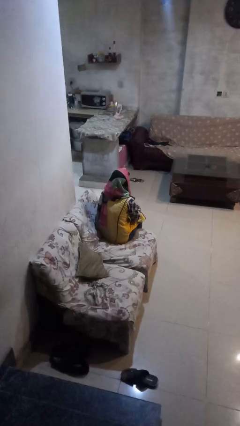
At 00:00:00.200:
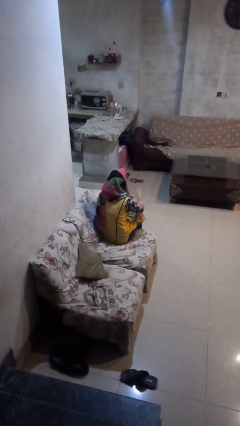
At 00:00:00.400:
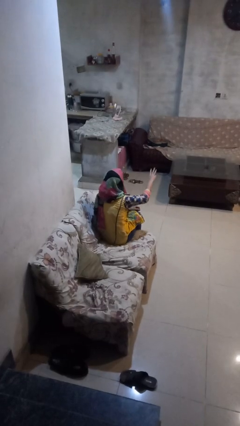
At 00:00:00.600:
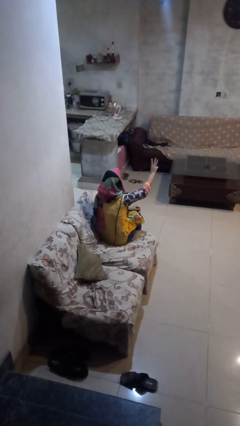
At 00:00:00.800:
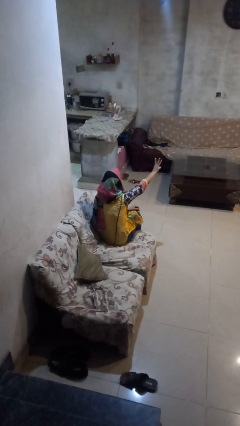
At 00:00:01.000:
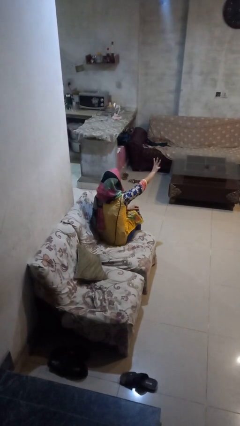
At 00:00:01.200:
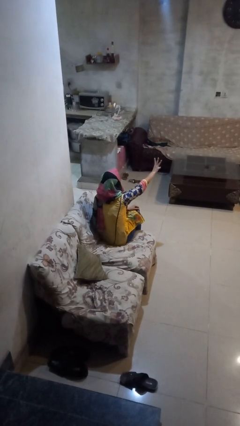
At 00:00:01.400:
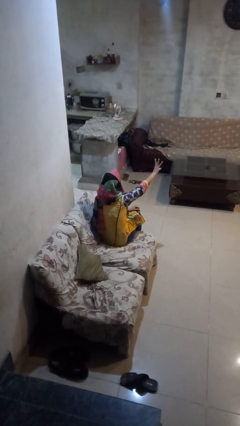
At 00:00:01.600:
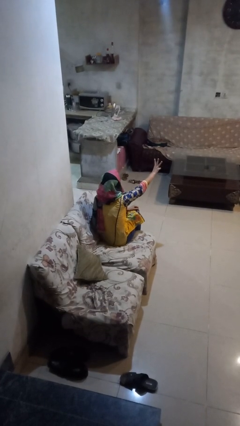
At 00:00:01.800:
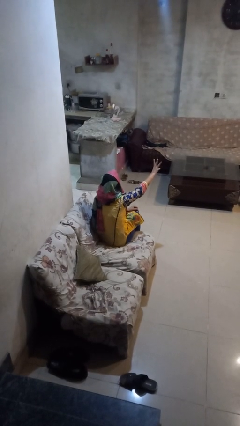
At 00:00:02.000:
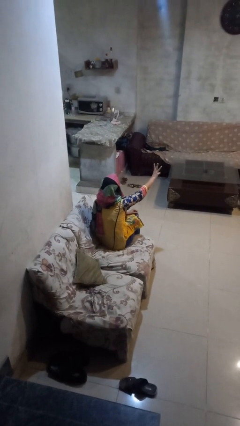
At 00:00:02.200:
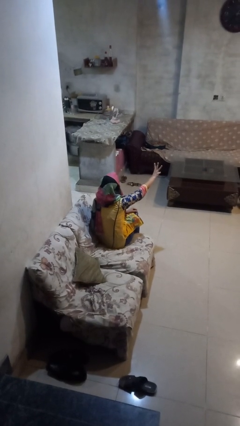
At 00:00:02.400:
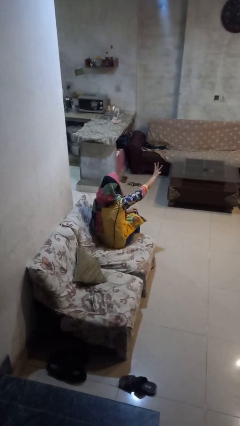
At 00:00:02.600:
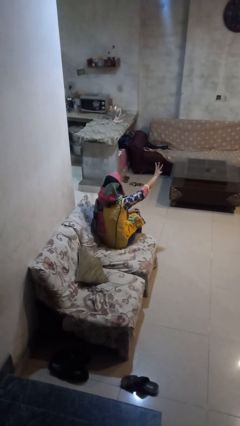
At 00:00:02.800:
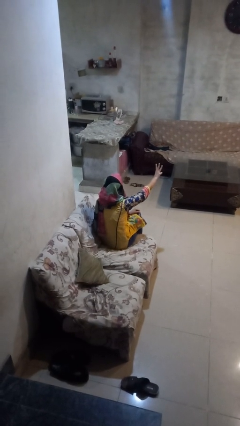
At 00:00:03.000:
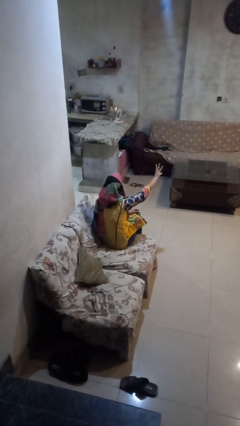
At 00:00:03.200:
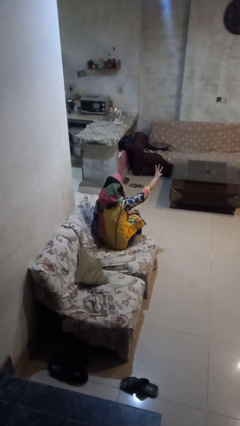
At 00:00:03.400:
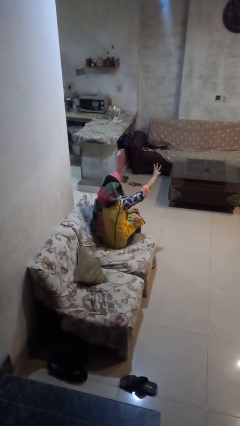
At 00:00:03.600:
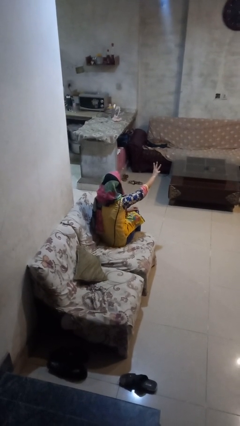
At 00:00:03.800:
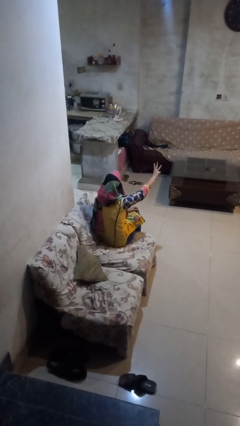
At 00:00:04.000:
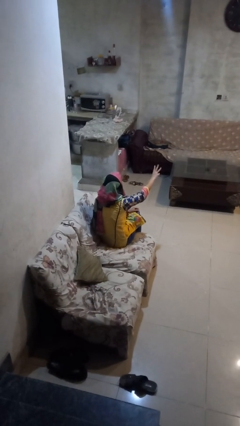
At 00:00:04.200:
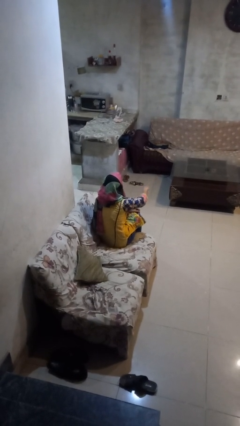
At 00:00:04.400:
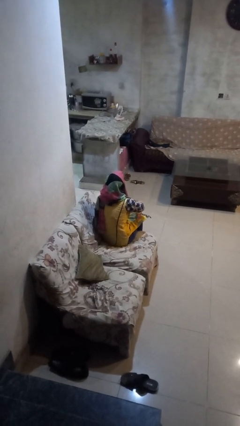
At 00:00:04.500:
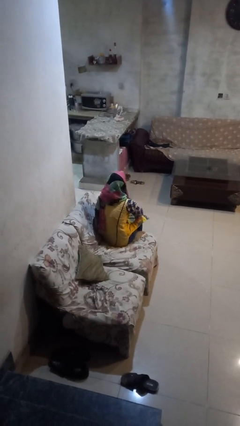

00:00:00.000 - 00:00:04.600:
person gestures number three

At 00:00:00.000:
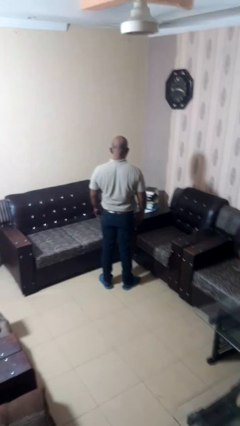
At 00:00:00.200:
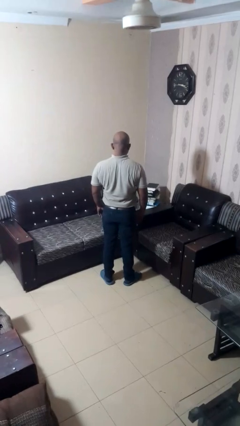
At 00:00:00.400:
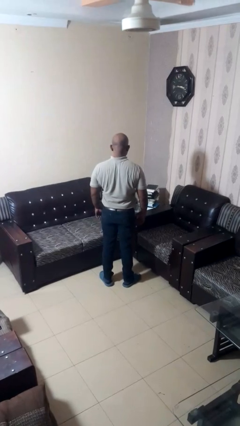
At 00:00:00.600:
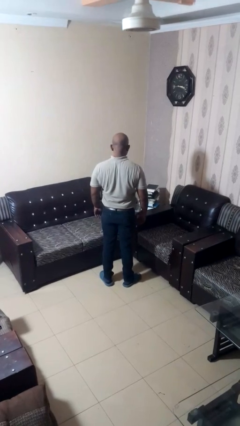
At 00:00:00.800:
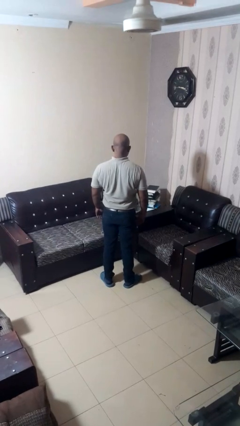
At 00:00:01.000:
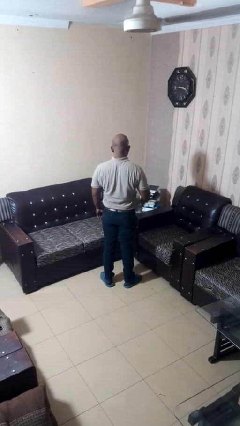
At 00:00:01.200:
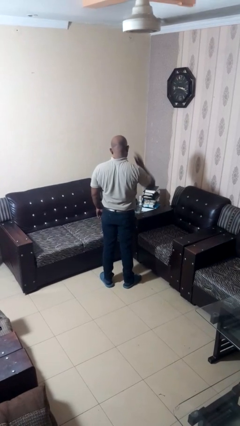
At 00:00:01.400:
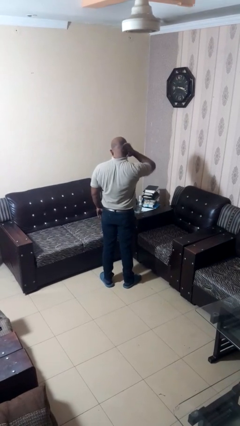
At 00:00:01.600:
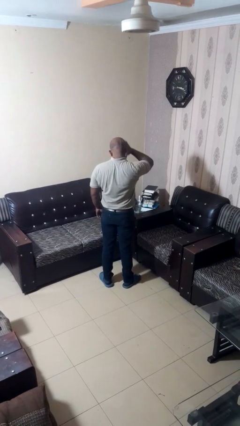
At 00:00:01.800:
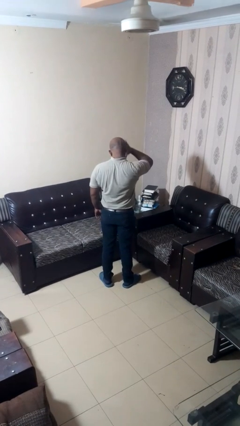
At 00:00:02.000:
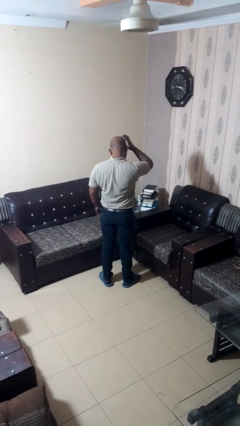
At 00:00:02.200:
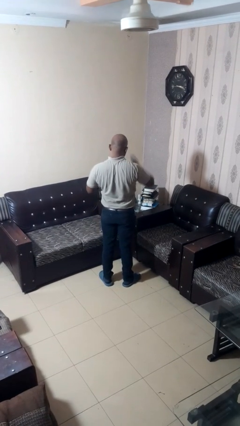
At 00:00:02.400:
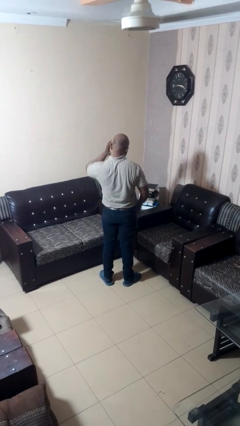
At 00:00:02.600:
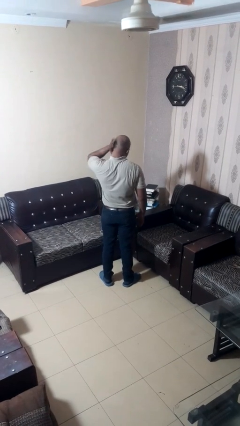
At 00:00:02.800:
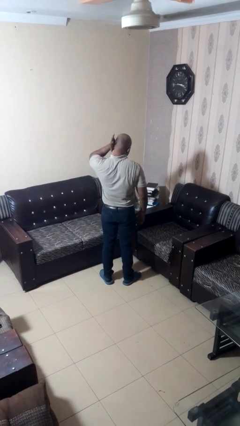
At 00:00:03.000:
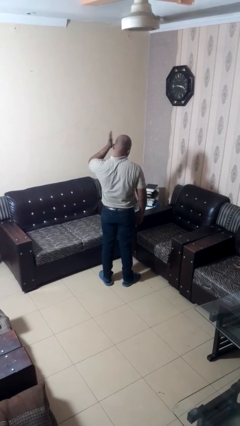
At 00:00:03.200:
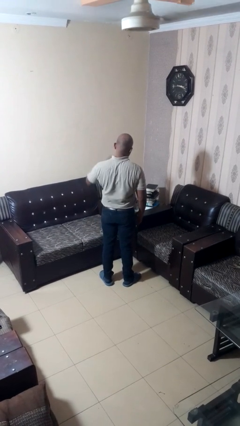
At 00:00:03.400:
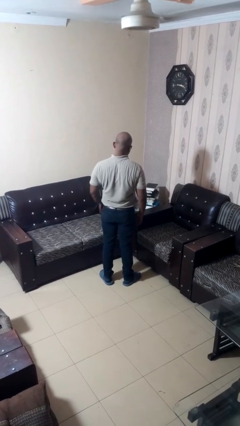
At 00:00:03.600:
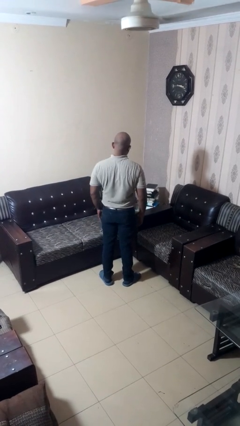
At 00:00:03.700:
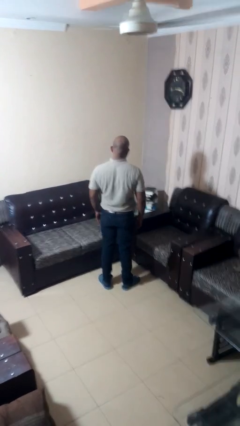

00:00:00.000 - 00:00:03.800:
person touches earlobe

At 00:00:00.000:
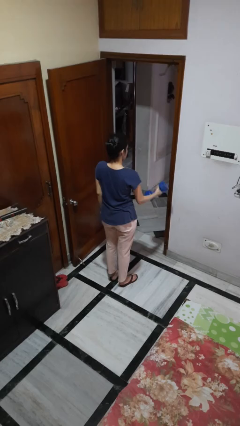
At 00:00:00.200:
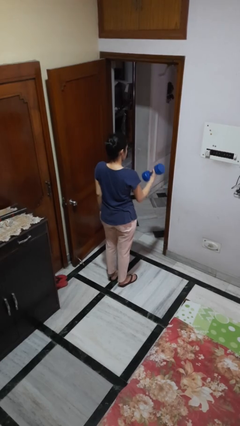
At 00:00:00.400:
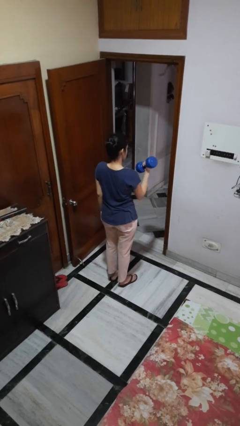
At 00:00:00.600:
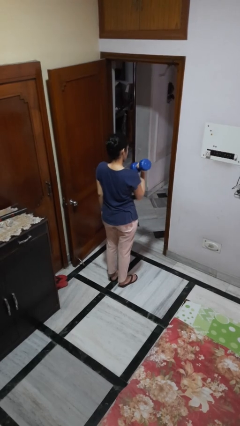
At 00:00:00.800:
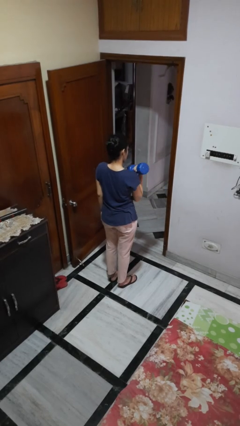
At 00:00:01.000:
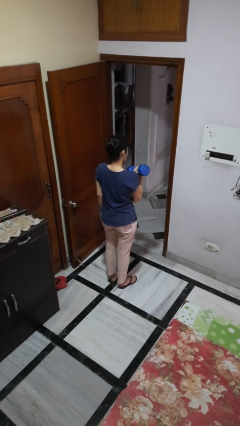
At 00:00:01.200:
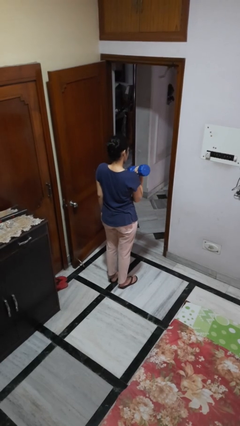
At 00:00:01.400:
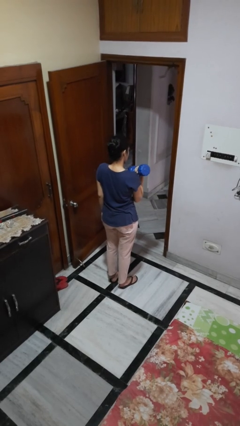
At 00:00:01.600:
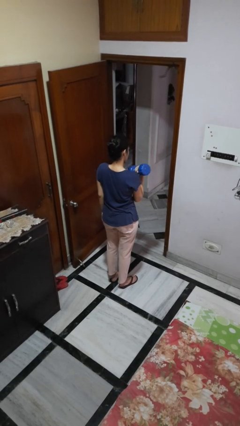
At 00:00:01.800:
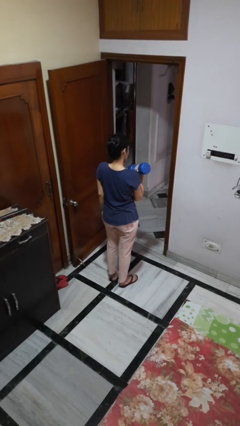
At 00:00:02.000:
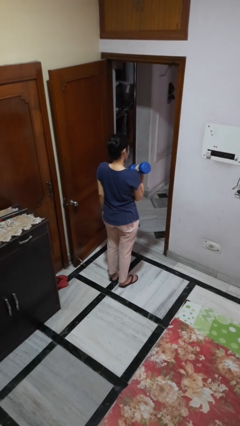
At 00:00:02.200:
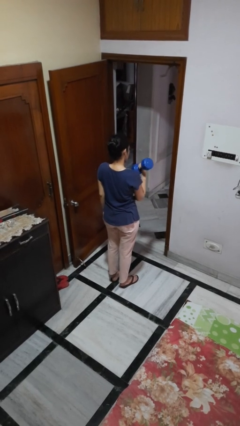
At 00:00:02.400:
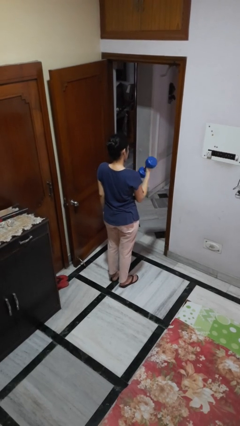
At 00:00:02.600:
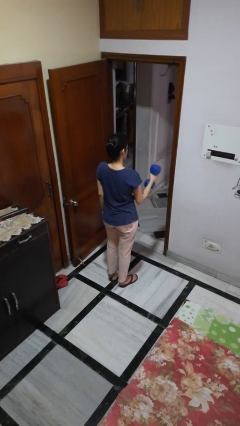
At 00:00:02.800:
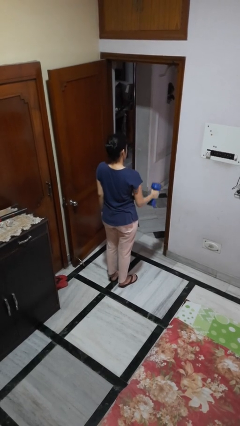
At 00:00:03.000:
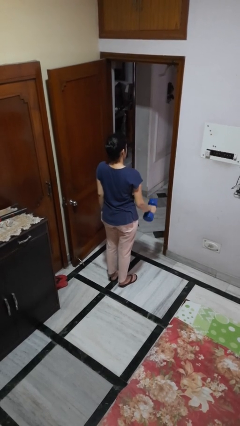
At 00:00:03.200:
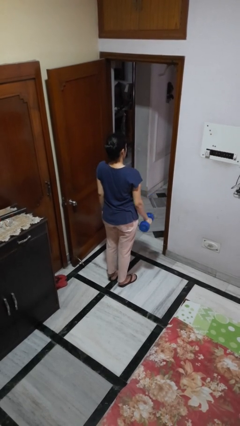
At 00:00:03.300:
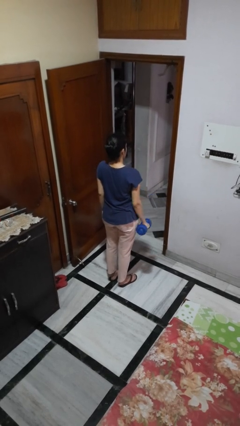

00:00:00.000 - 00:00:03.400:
person lifts dumbbells

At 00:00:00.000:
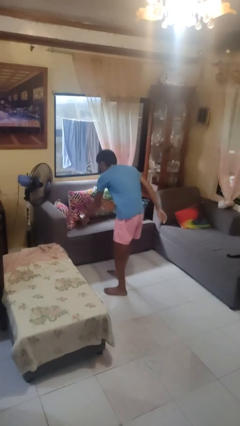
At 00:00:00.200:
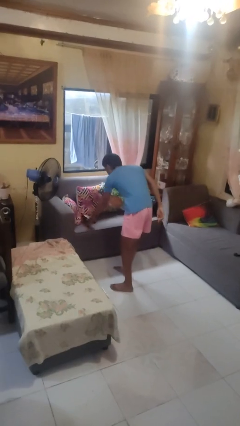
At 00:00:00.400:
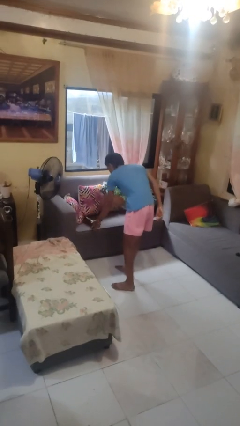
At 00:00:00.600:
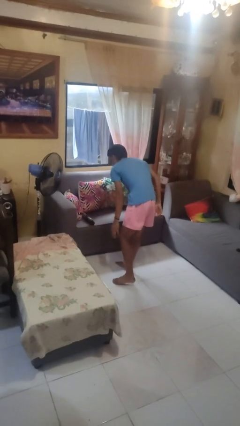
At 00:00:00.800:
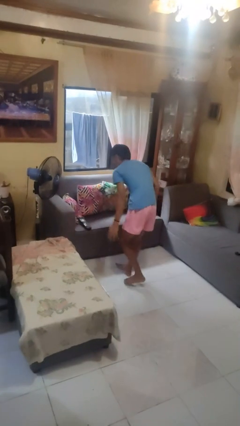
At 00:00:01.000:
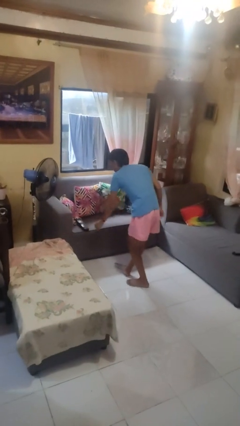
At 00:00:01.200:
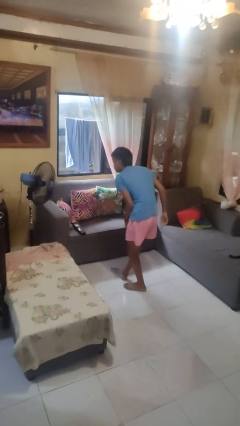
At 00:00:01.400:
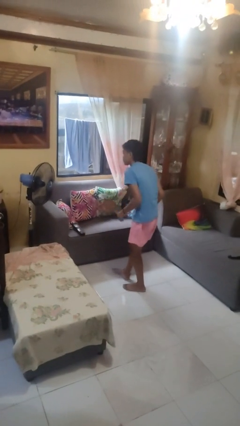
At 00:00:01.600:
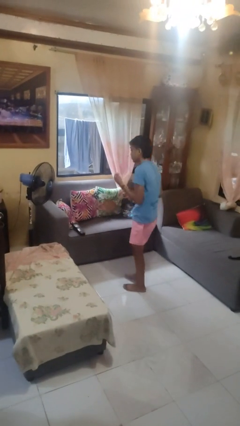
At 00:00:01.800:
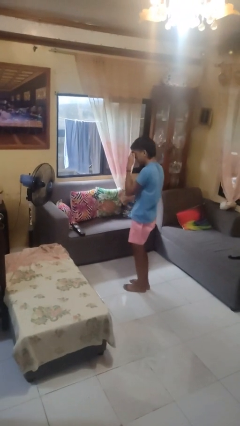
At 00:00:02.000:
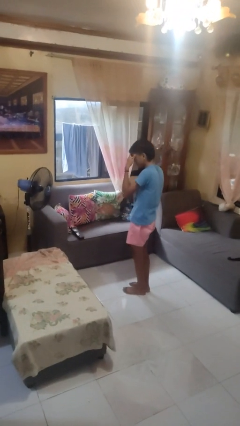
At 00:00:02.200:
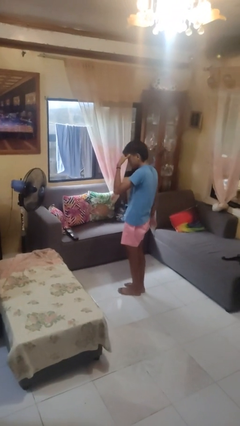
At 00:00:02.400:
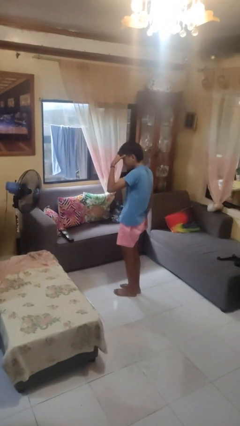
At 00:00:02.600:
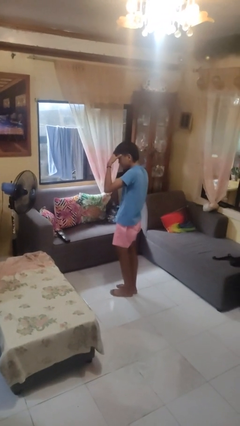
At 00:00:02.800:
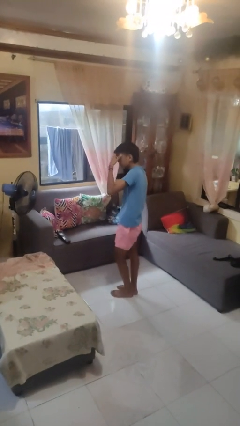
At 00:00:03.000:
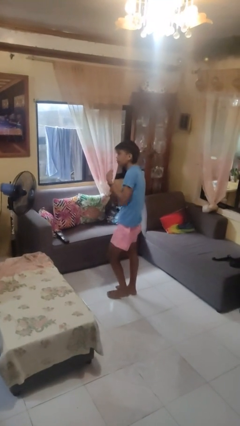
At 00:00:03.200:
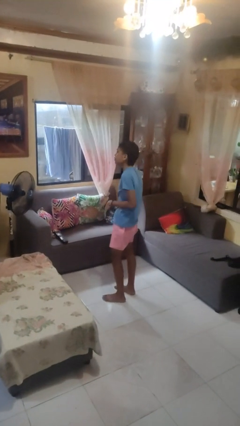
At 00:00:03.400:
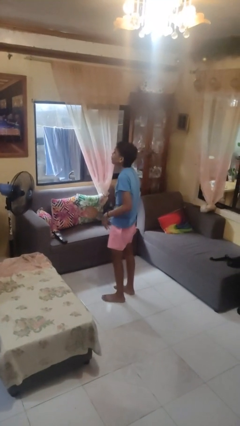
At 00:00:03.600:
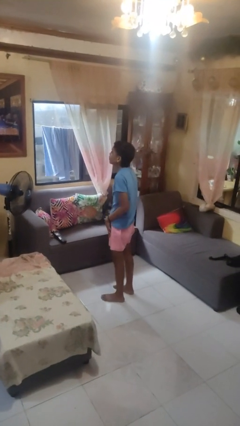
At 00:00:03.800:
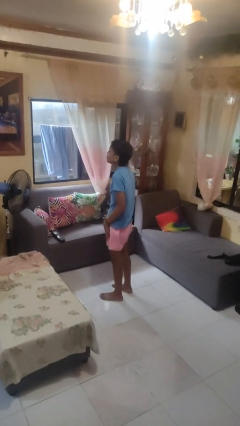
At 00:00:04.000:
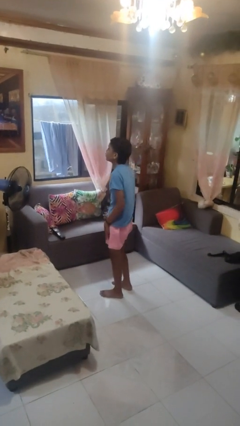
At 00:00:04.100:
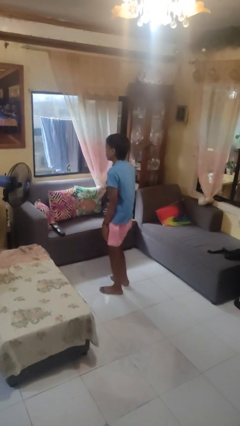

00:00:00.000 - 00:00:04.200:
person puts down object on couch

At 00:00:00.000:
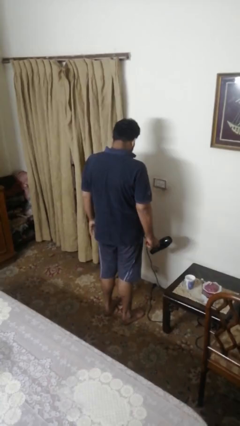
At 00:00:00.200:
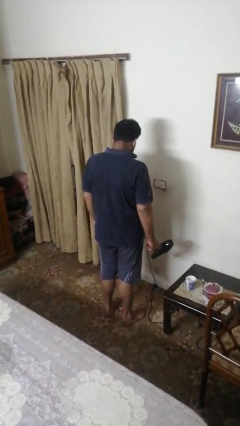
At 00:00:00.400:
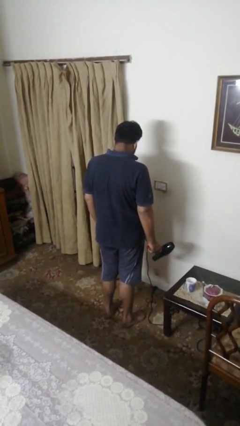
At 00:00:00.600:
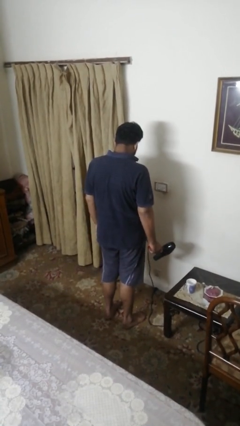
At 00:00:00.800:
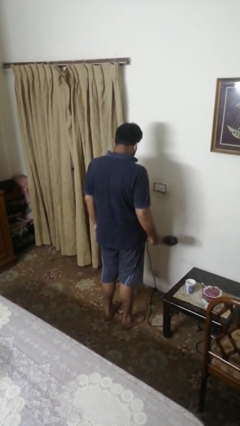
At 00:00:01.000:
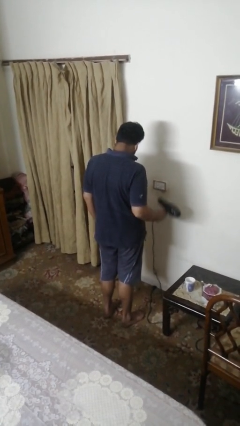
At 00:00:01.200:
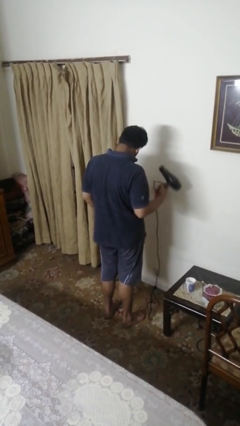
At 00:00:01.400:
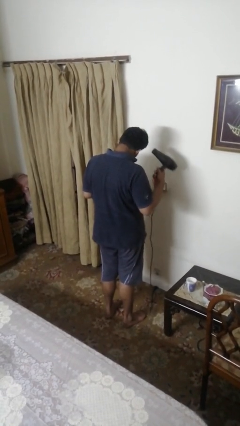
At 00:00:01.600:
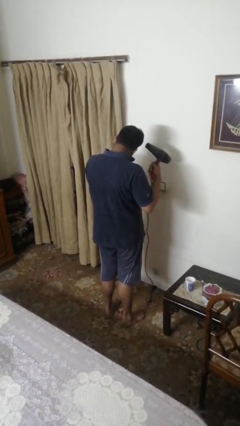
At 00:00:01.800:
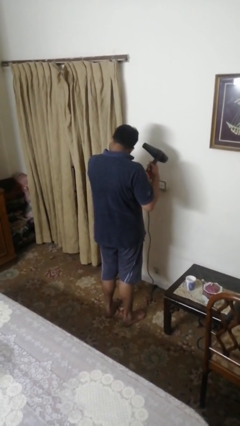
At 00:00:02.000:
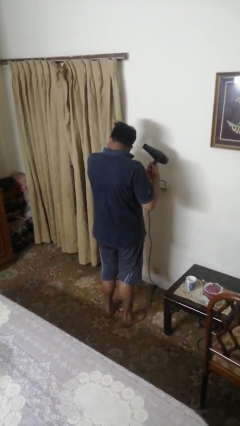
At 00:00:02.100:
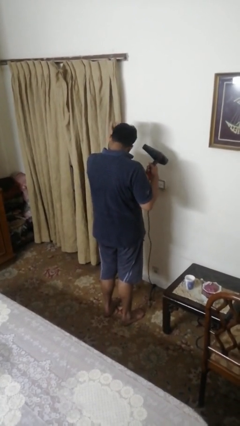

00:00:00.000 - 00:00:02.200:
person dries hair with hairdryer
